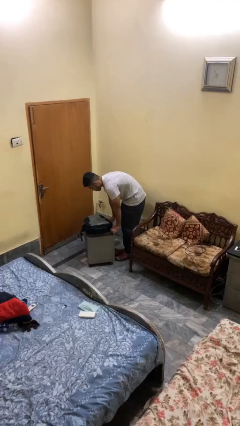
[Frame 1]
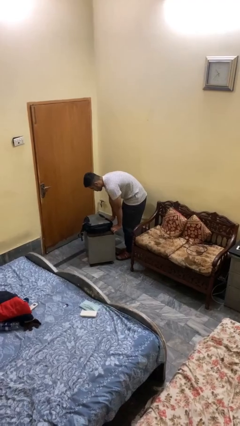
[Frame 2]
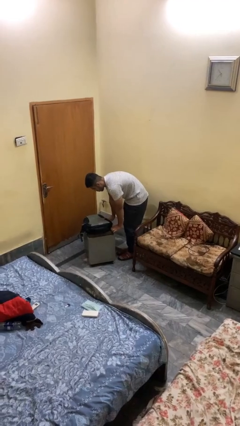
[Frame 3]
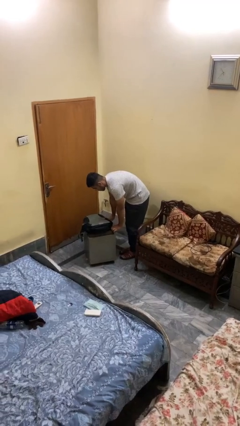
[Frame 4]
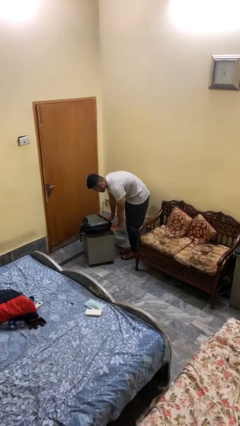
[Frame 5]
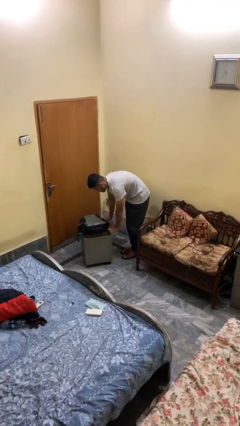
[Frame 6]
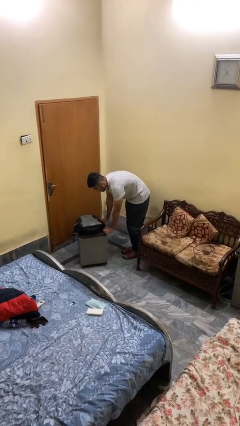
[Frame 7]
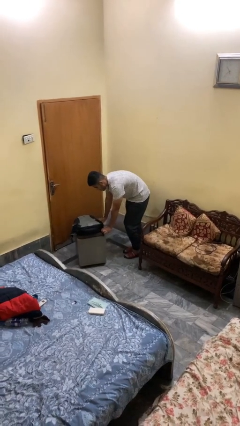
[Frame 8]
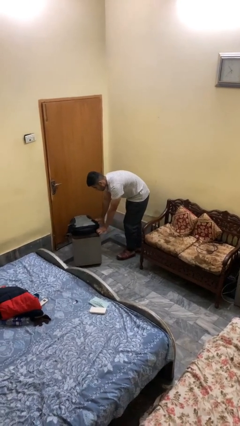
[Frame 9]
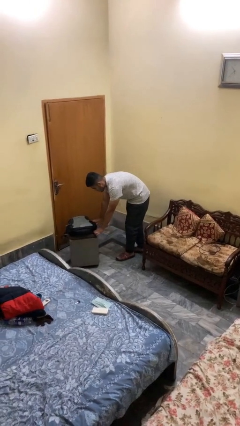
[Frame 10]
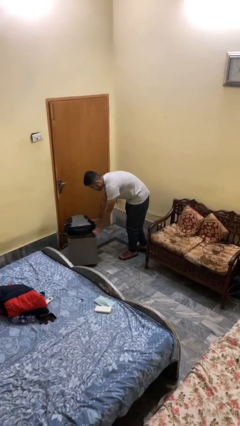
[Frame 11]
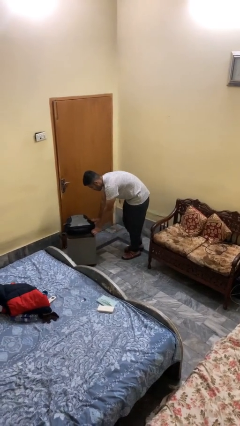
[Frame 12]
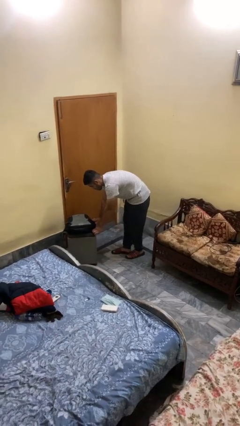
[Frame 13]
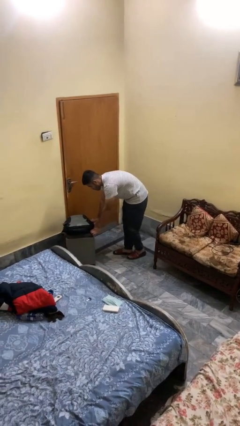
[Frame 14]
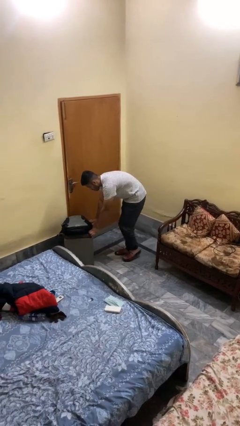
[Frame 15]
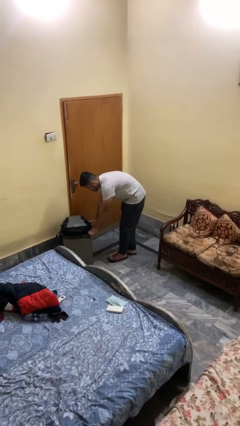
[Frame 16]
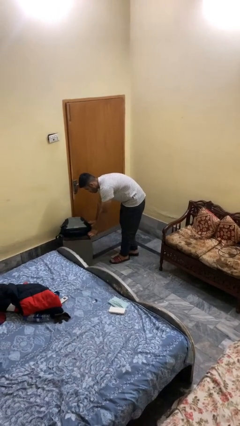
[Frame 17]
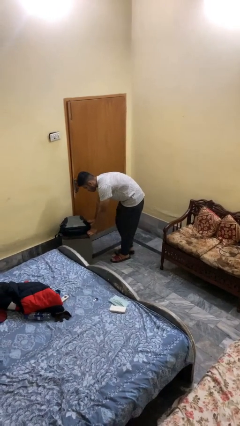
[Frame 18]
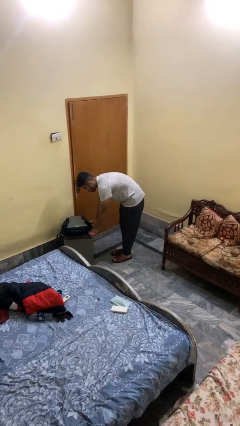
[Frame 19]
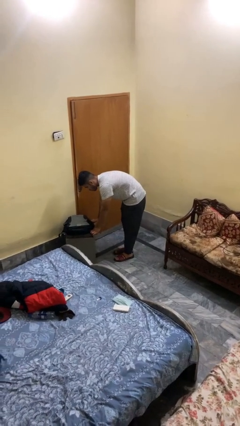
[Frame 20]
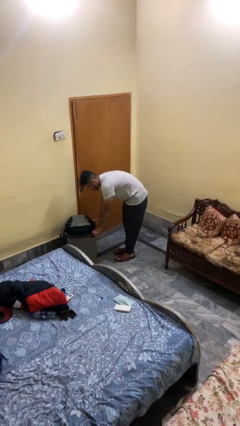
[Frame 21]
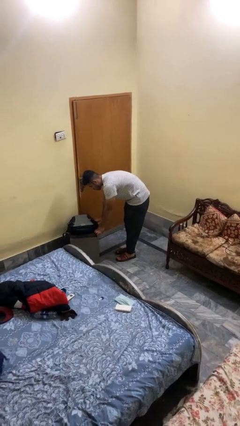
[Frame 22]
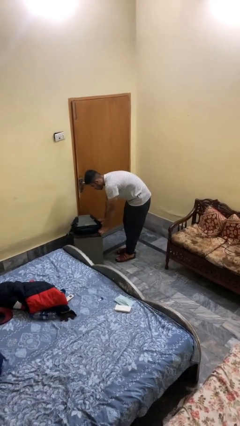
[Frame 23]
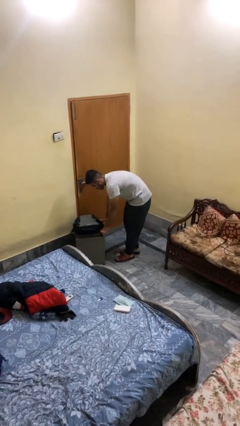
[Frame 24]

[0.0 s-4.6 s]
person pushes wheeled cart

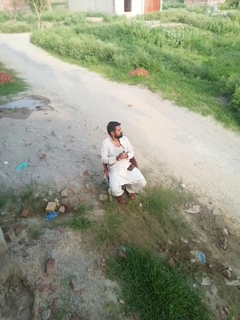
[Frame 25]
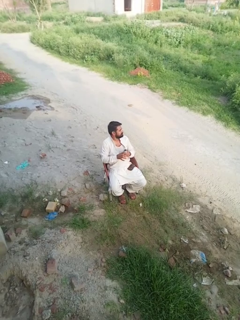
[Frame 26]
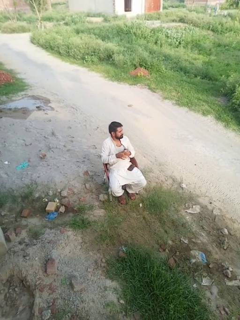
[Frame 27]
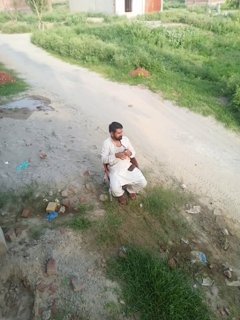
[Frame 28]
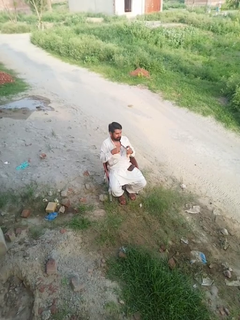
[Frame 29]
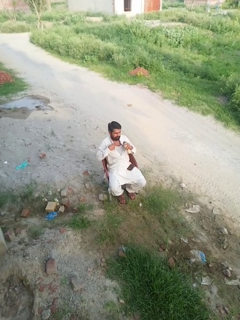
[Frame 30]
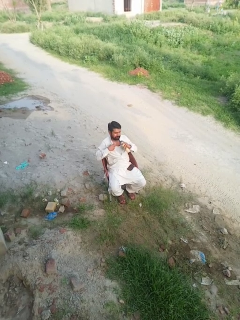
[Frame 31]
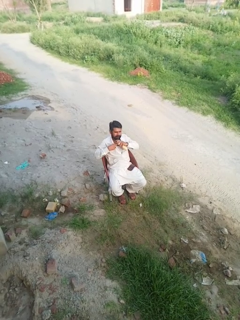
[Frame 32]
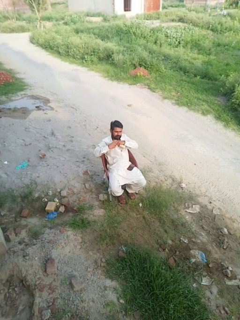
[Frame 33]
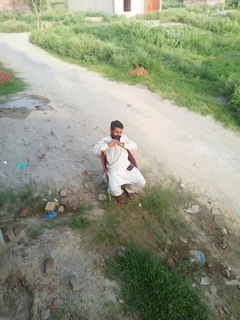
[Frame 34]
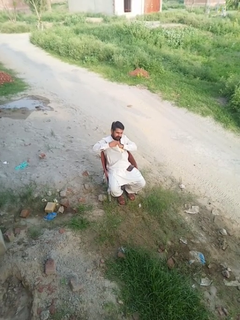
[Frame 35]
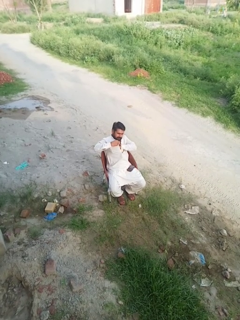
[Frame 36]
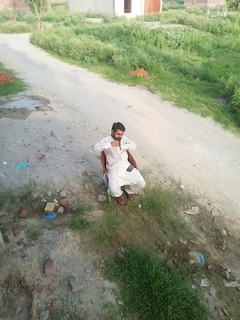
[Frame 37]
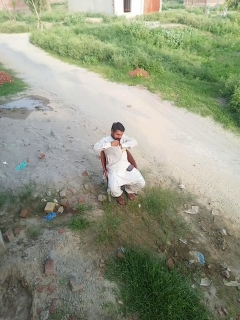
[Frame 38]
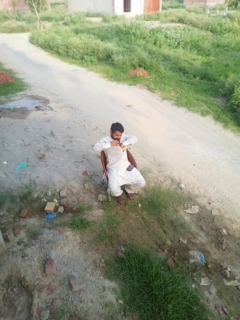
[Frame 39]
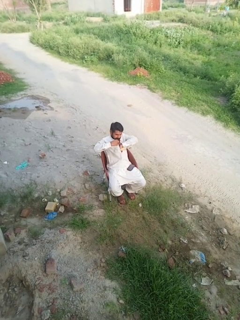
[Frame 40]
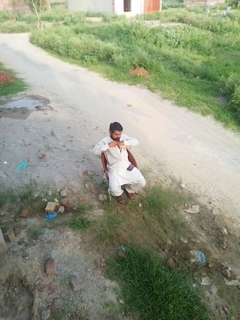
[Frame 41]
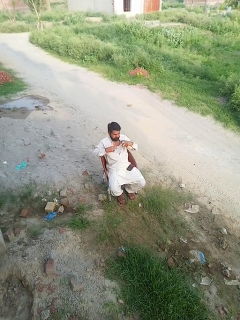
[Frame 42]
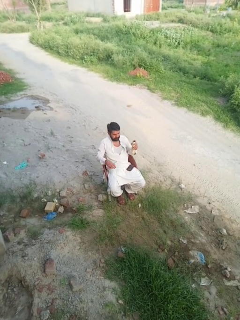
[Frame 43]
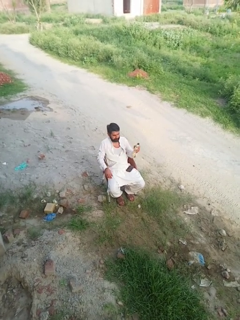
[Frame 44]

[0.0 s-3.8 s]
person applies deodorant

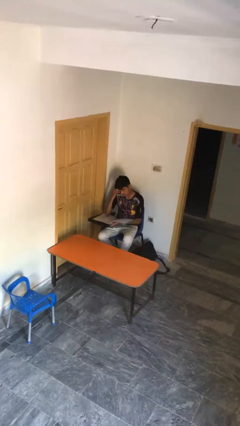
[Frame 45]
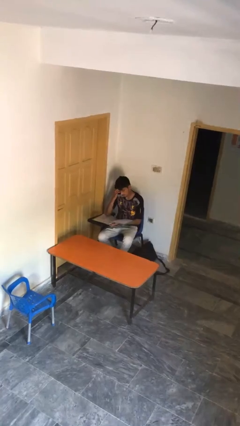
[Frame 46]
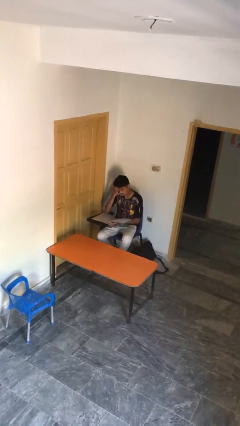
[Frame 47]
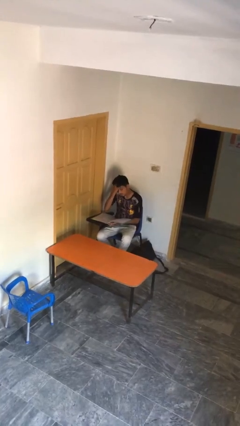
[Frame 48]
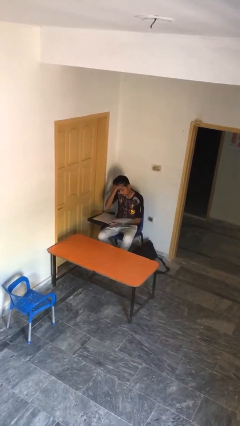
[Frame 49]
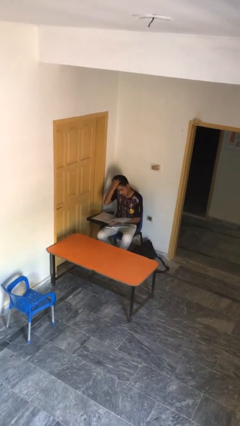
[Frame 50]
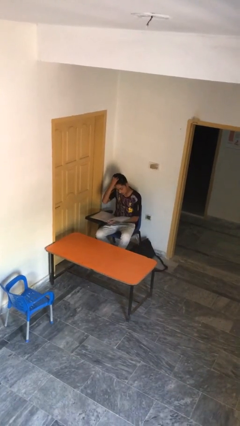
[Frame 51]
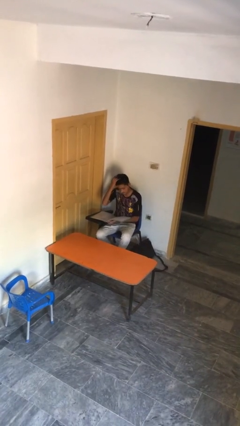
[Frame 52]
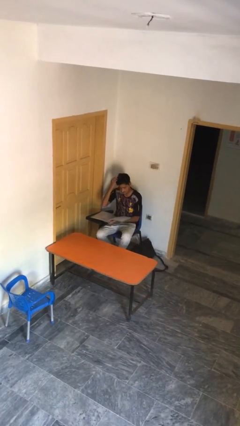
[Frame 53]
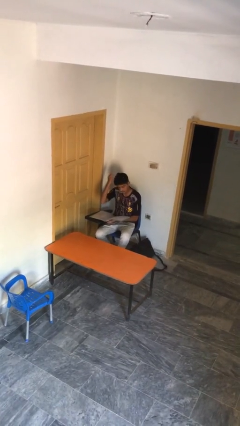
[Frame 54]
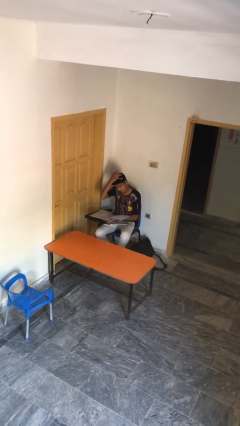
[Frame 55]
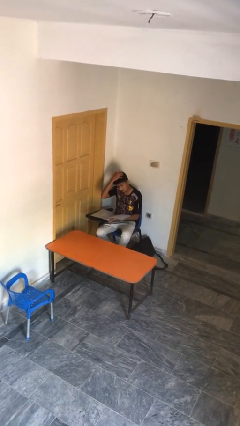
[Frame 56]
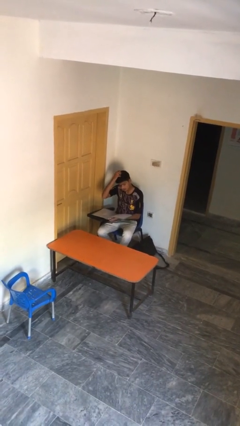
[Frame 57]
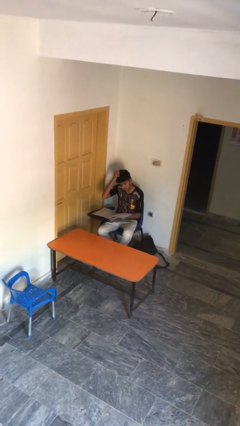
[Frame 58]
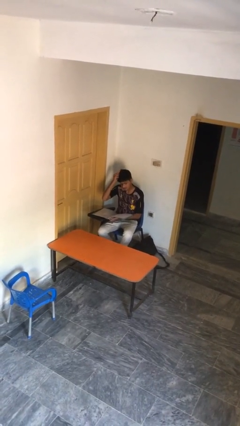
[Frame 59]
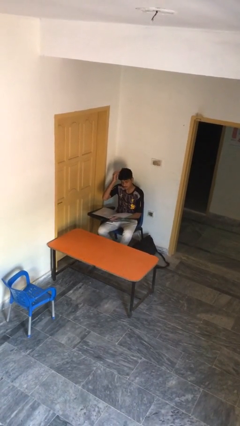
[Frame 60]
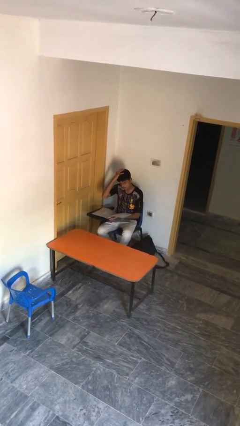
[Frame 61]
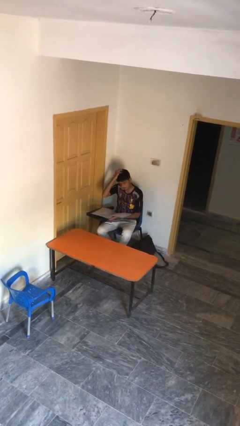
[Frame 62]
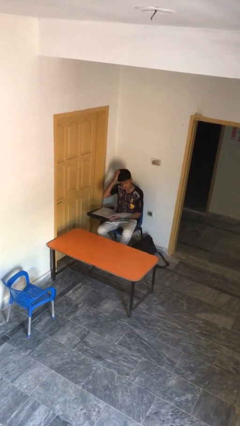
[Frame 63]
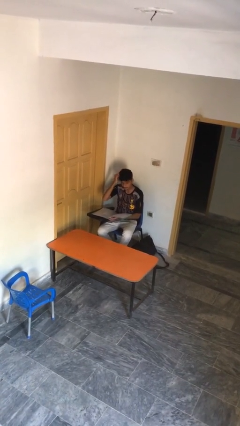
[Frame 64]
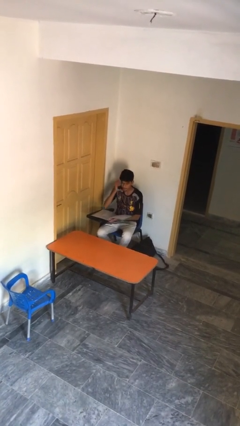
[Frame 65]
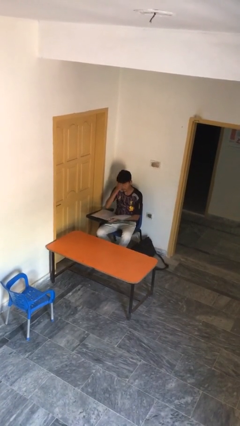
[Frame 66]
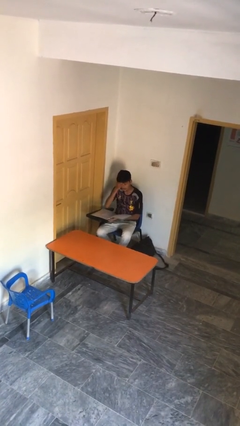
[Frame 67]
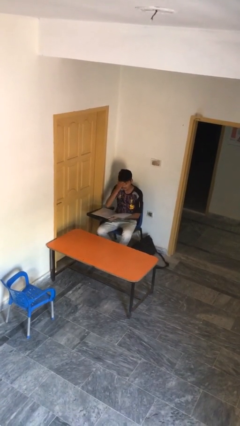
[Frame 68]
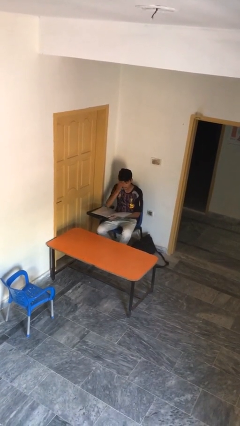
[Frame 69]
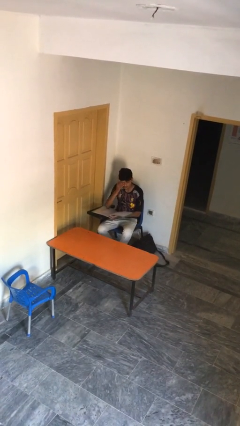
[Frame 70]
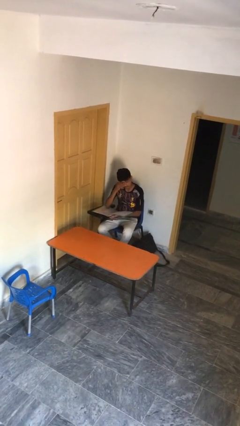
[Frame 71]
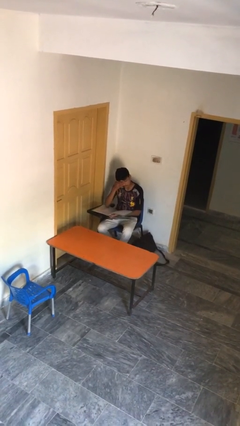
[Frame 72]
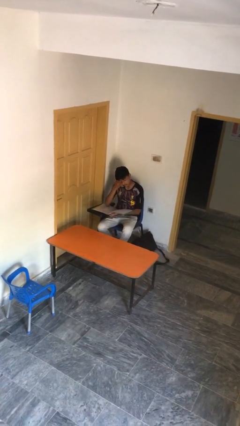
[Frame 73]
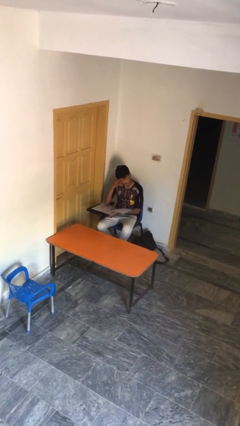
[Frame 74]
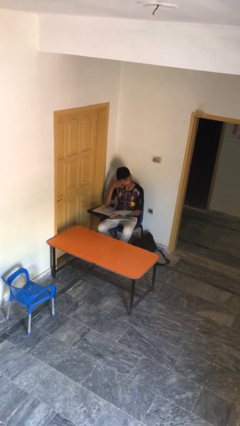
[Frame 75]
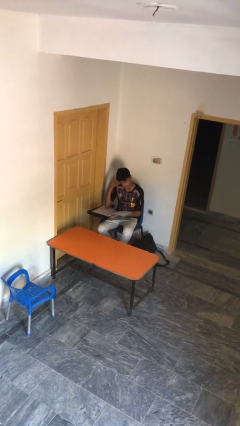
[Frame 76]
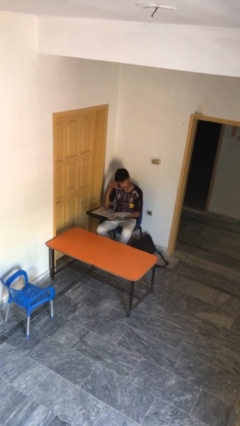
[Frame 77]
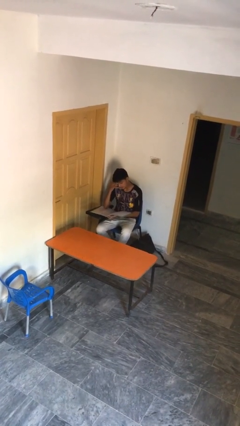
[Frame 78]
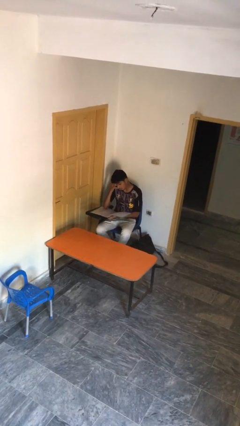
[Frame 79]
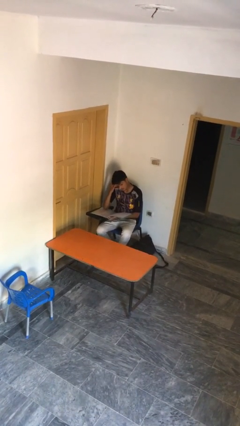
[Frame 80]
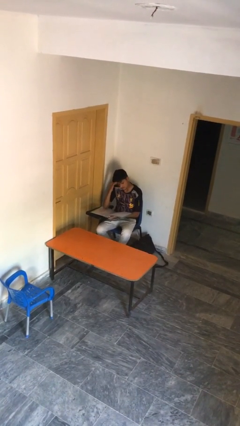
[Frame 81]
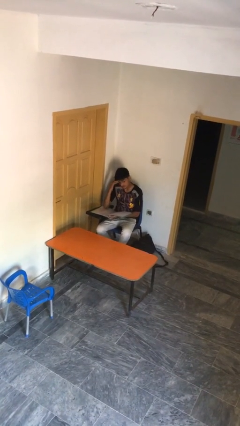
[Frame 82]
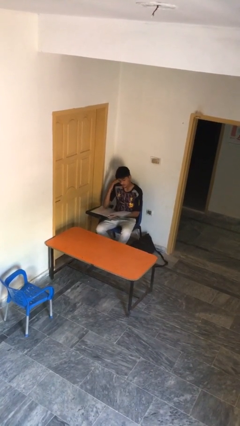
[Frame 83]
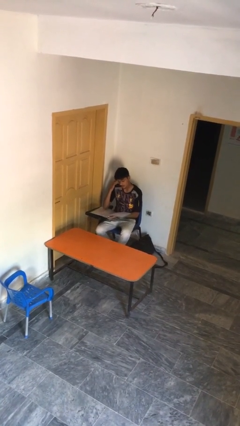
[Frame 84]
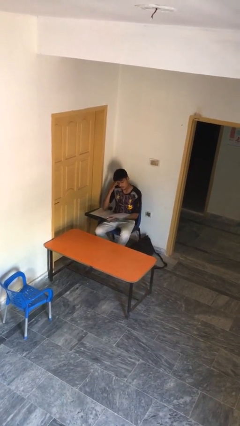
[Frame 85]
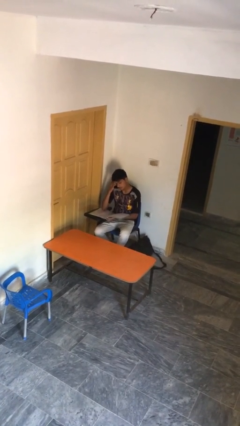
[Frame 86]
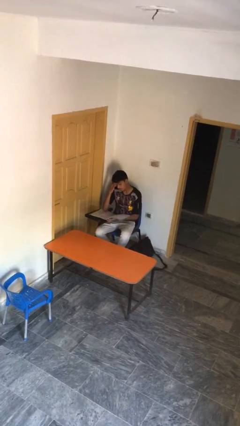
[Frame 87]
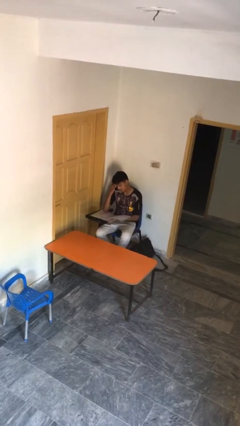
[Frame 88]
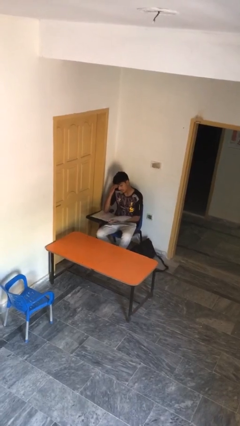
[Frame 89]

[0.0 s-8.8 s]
person reads document

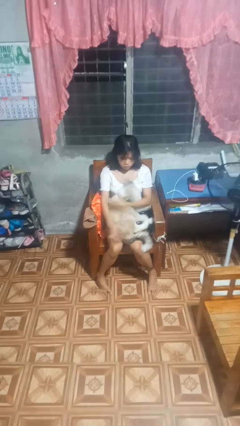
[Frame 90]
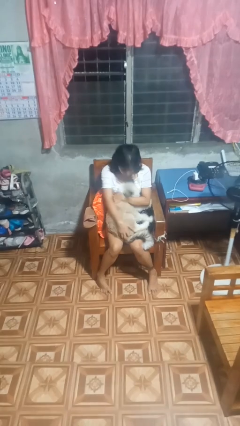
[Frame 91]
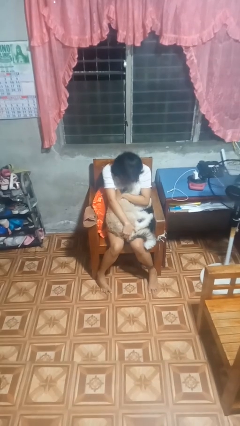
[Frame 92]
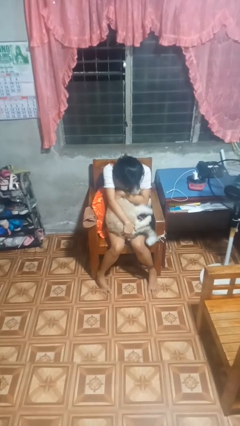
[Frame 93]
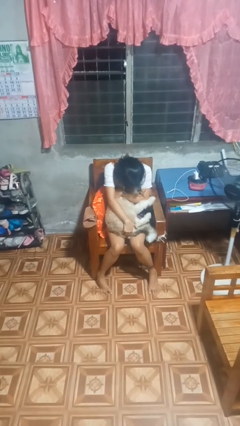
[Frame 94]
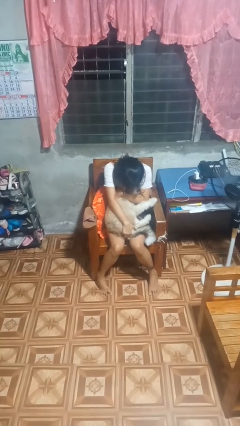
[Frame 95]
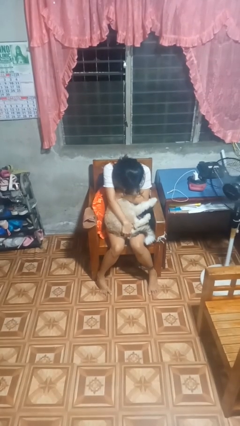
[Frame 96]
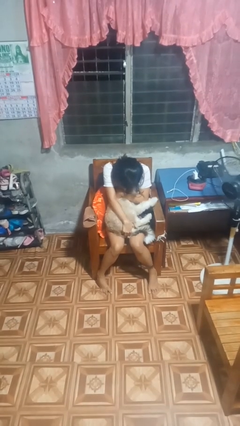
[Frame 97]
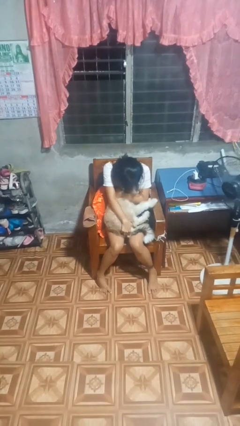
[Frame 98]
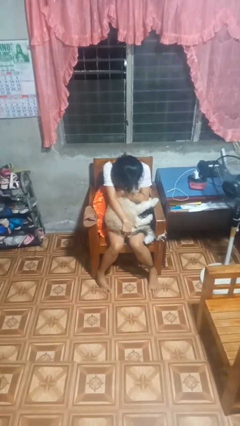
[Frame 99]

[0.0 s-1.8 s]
person hugs dog
